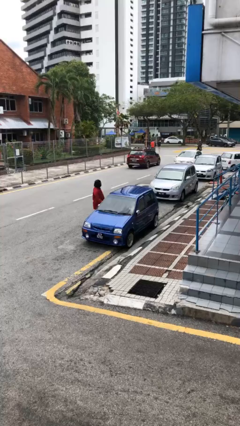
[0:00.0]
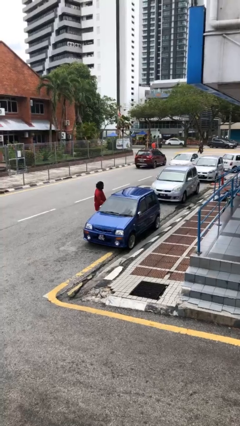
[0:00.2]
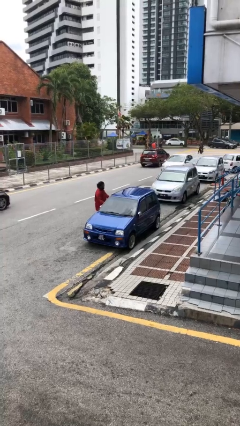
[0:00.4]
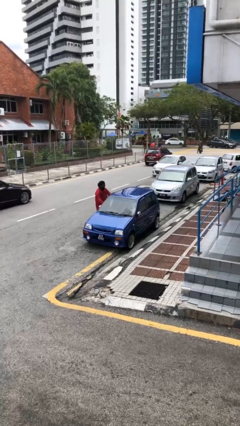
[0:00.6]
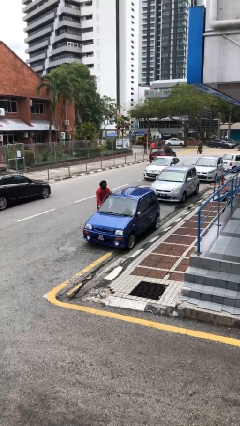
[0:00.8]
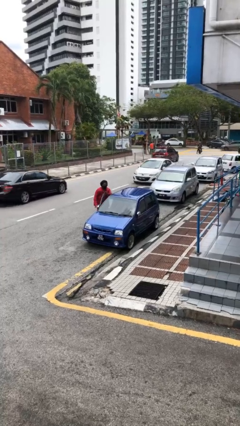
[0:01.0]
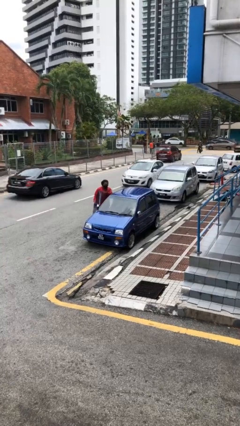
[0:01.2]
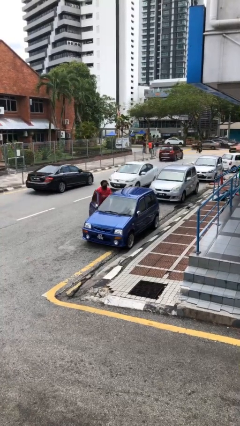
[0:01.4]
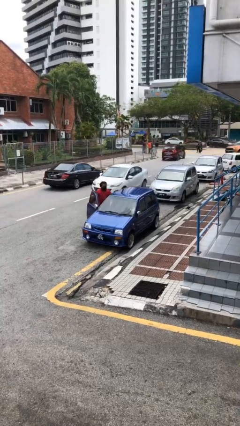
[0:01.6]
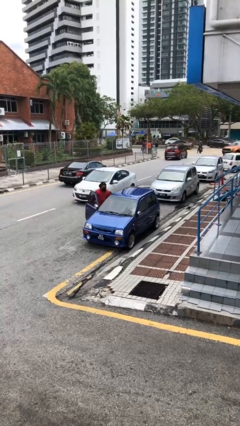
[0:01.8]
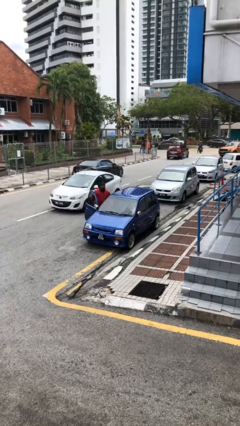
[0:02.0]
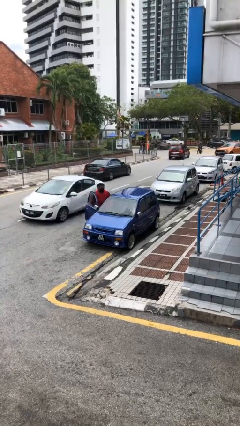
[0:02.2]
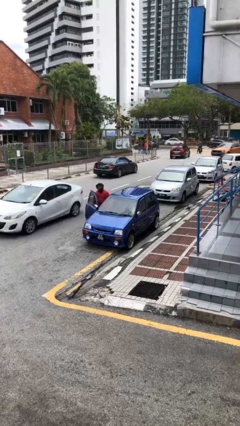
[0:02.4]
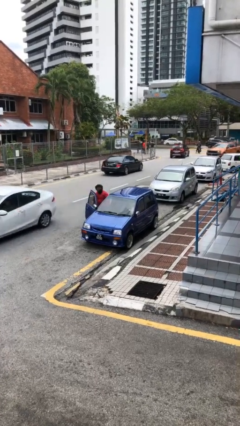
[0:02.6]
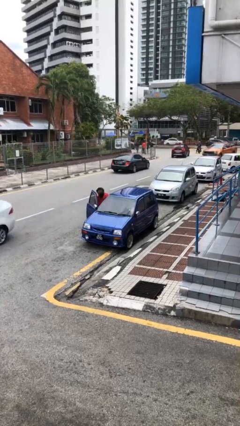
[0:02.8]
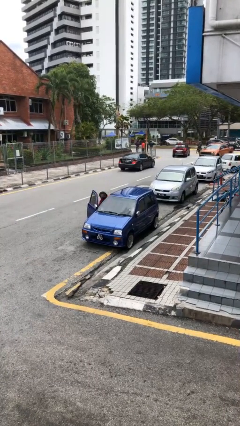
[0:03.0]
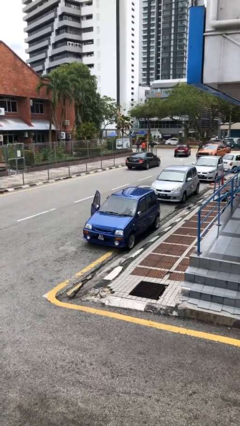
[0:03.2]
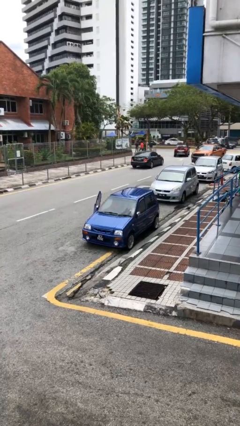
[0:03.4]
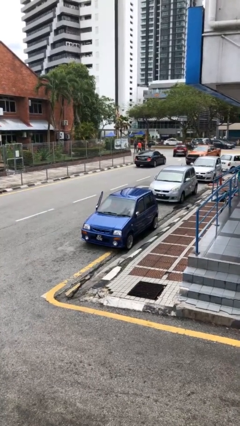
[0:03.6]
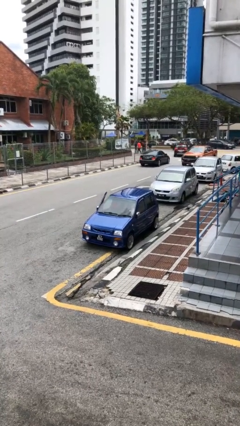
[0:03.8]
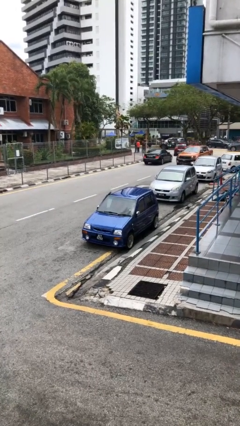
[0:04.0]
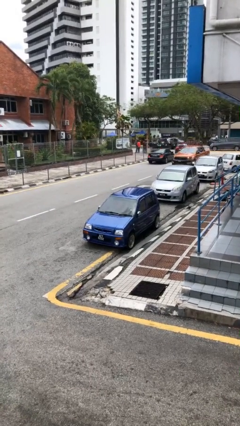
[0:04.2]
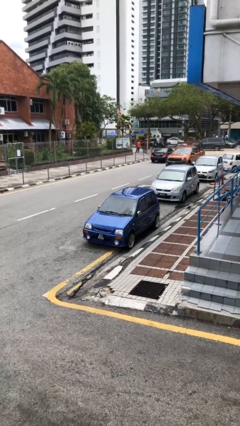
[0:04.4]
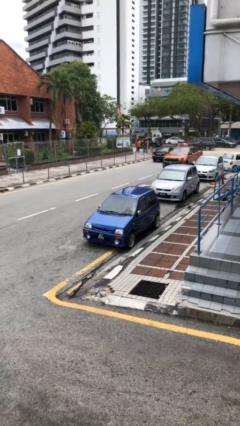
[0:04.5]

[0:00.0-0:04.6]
car picks up person

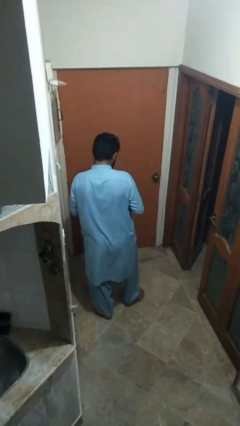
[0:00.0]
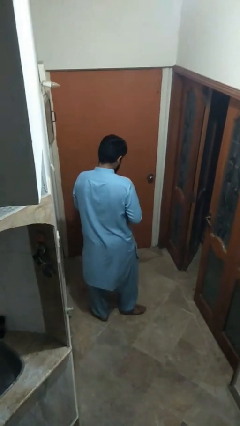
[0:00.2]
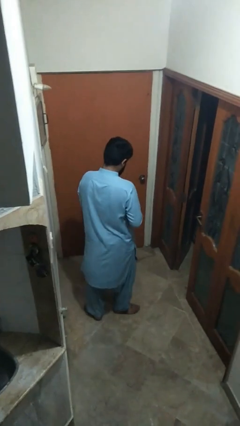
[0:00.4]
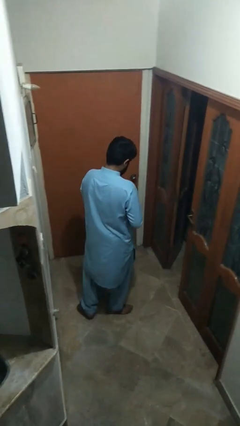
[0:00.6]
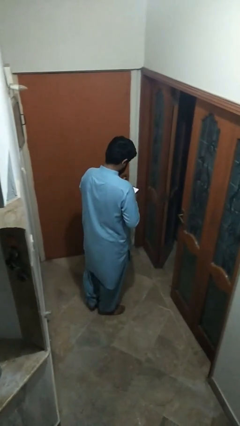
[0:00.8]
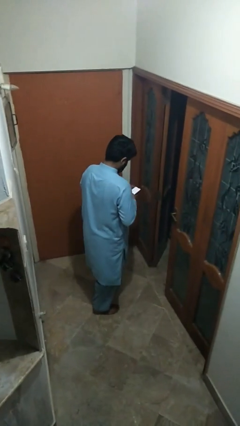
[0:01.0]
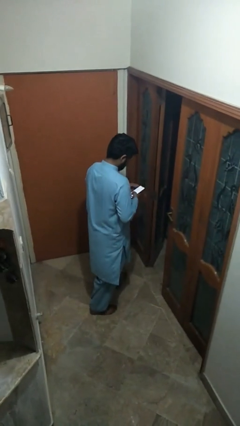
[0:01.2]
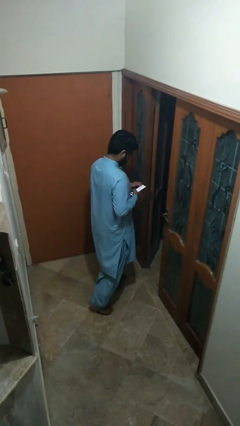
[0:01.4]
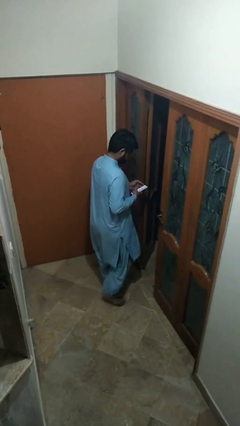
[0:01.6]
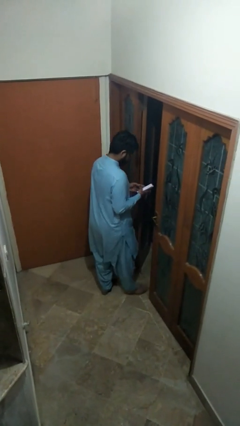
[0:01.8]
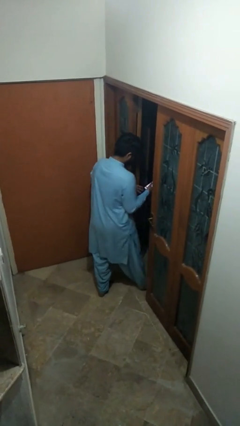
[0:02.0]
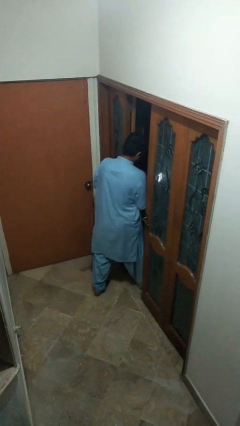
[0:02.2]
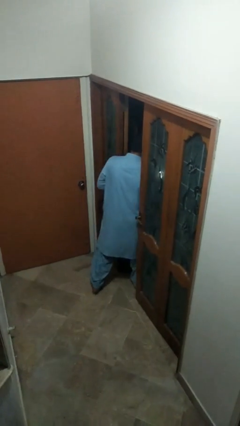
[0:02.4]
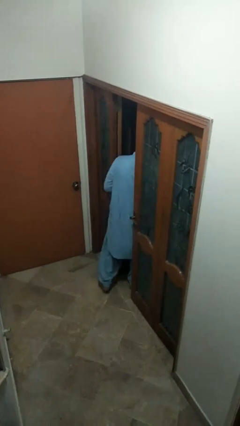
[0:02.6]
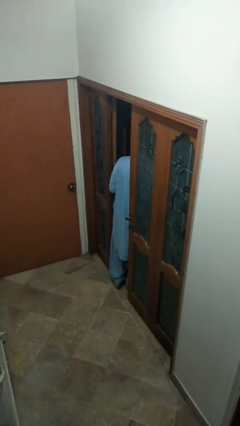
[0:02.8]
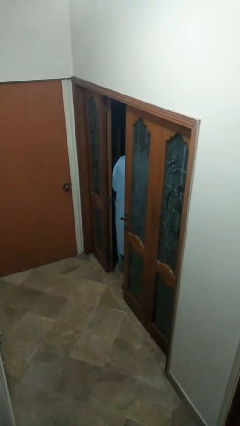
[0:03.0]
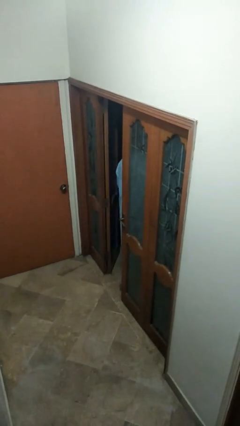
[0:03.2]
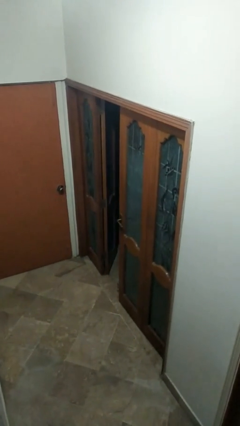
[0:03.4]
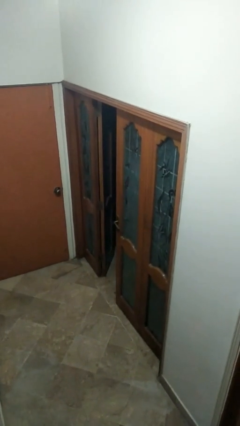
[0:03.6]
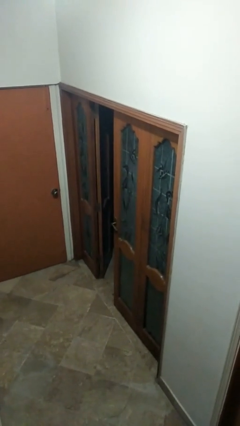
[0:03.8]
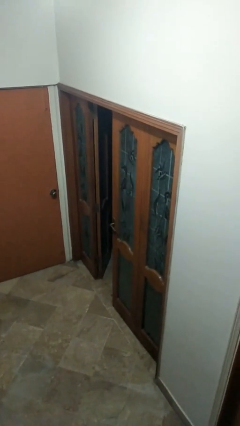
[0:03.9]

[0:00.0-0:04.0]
person exits scene through structure

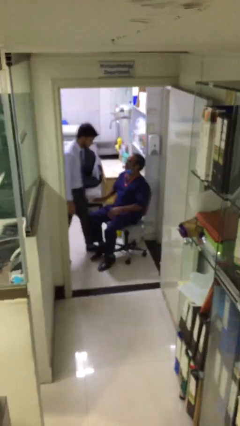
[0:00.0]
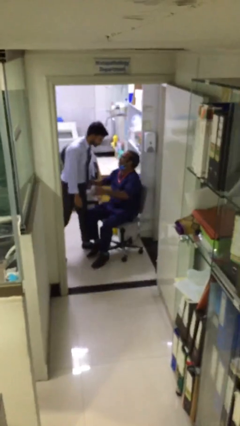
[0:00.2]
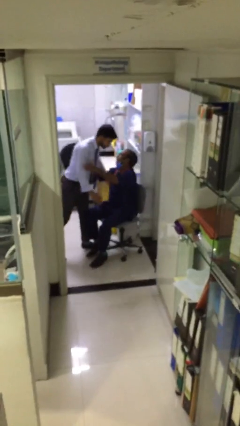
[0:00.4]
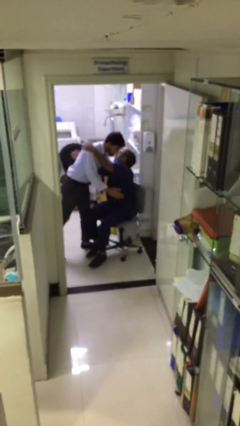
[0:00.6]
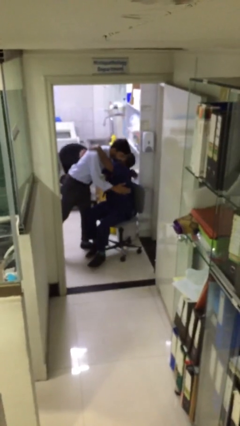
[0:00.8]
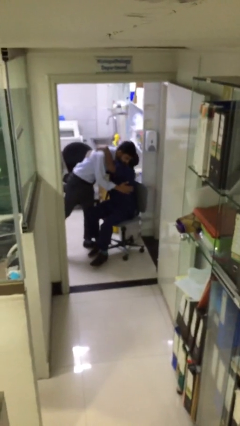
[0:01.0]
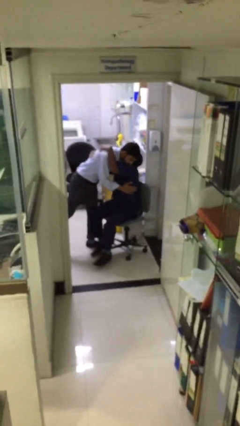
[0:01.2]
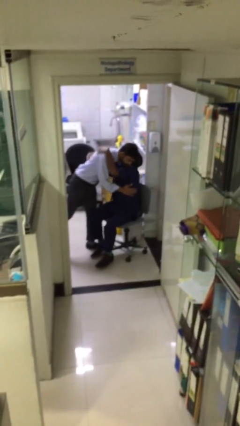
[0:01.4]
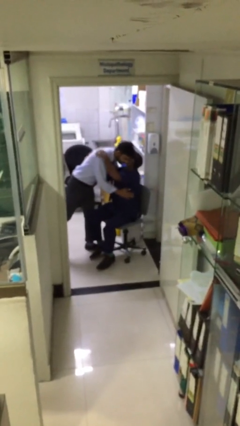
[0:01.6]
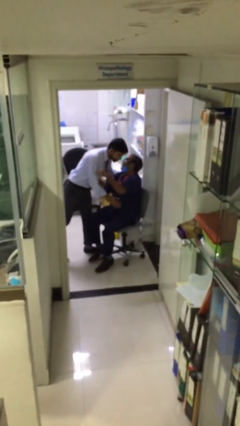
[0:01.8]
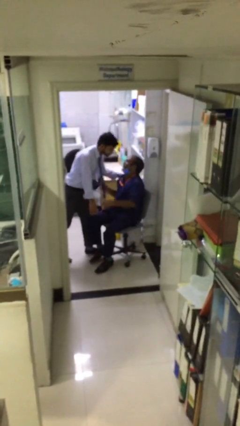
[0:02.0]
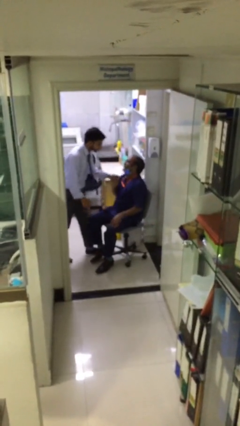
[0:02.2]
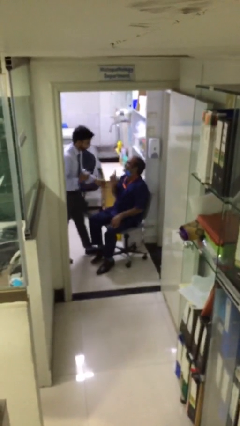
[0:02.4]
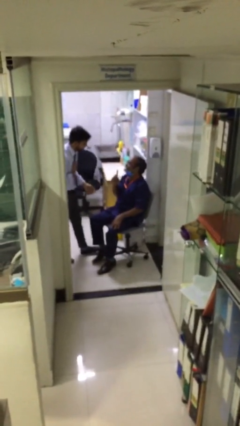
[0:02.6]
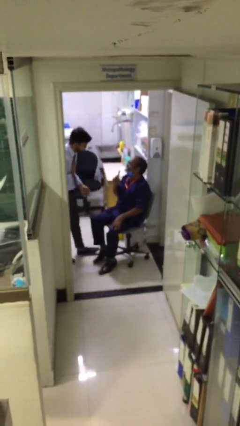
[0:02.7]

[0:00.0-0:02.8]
person embraces person

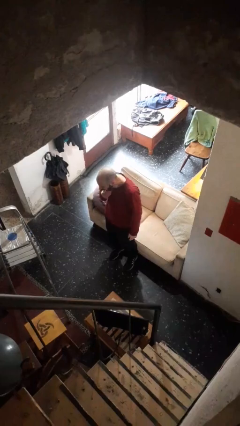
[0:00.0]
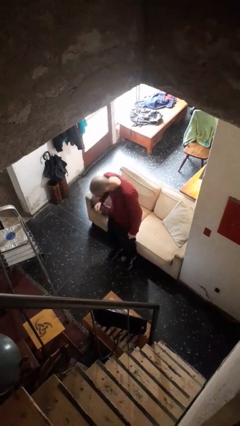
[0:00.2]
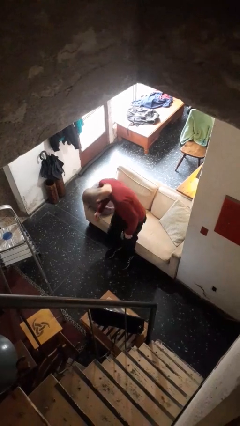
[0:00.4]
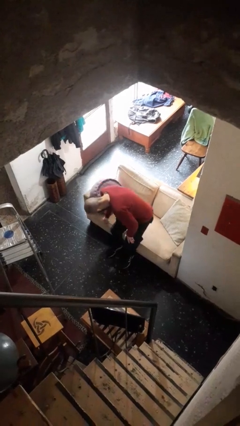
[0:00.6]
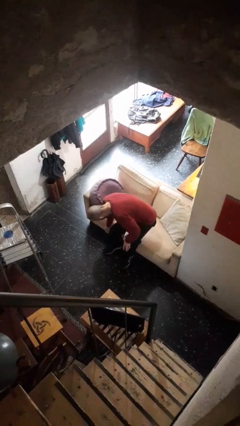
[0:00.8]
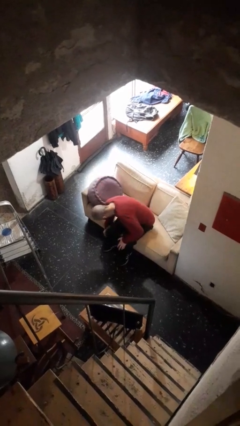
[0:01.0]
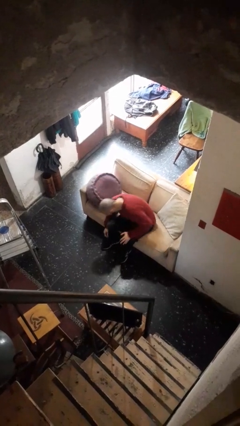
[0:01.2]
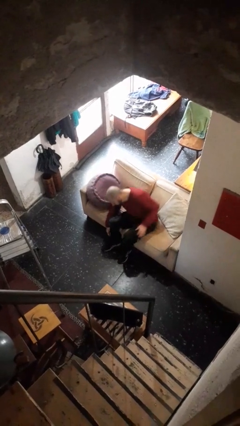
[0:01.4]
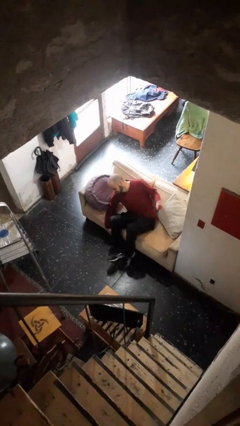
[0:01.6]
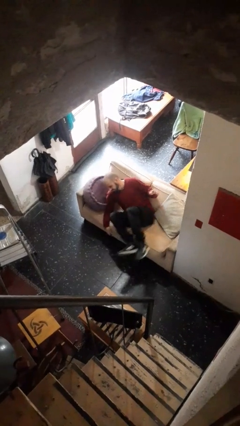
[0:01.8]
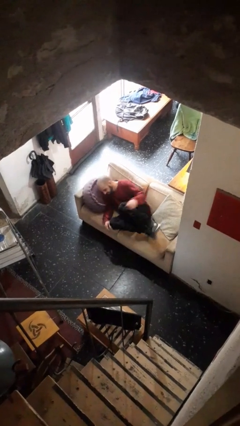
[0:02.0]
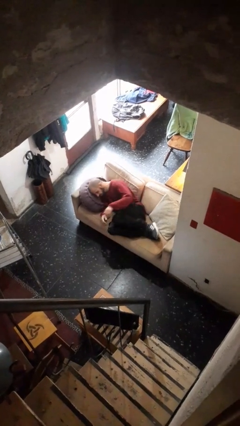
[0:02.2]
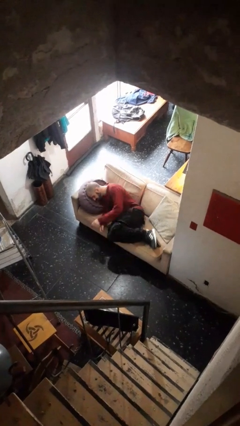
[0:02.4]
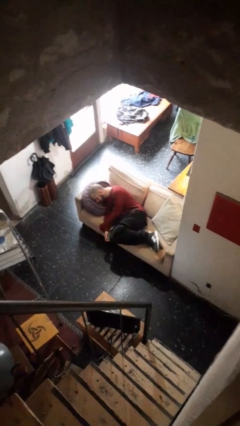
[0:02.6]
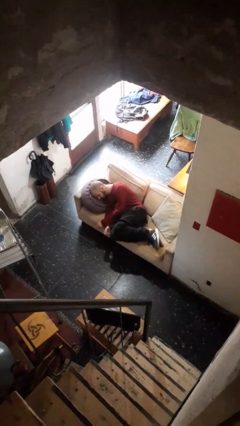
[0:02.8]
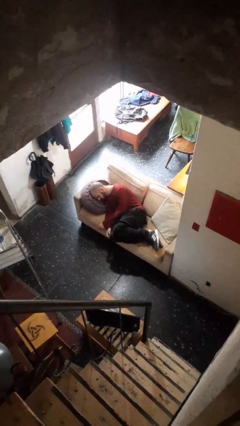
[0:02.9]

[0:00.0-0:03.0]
person lies down on couch

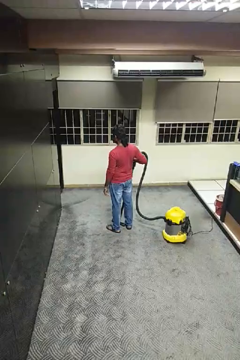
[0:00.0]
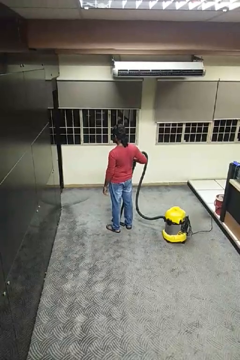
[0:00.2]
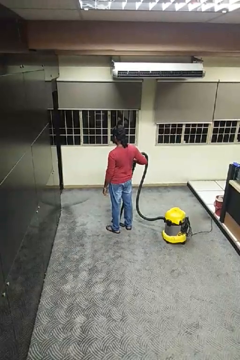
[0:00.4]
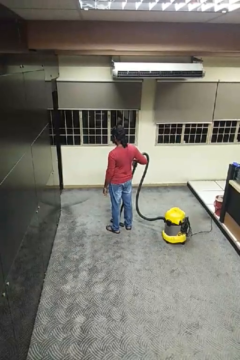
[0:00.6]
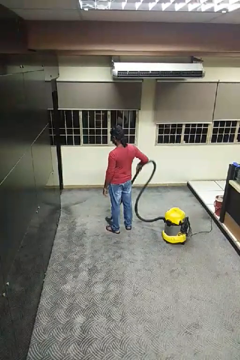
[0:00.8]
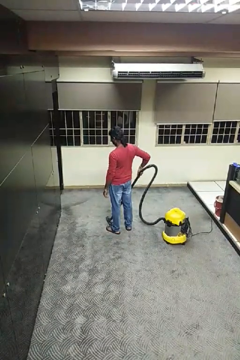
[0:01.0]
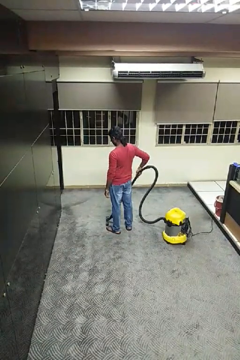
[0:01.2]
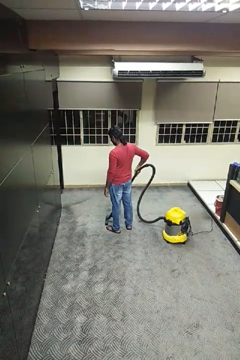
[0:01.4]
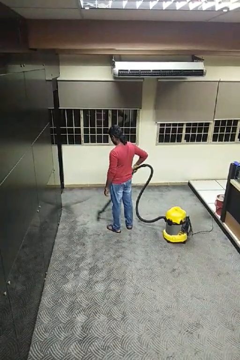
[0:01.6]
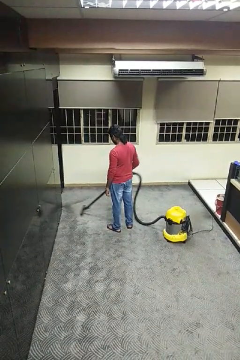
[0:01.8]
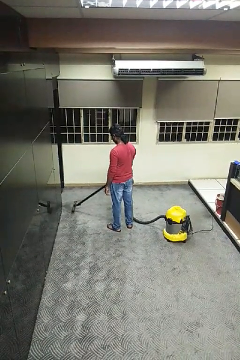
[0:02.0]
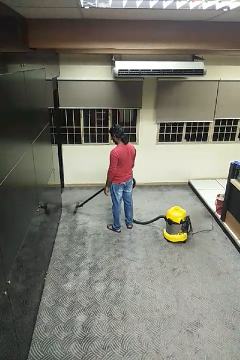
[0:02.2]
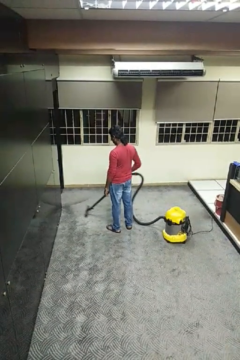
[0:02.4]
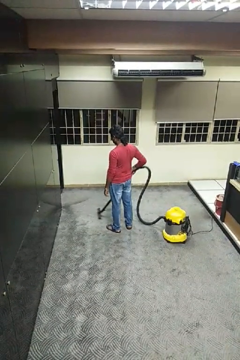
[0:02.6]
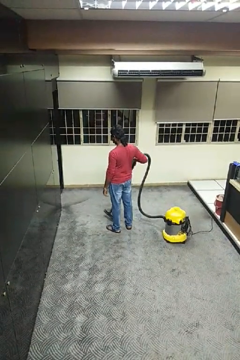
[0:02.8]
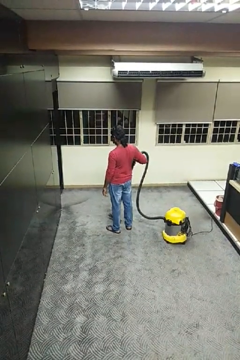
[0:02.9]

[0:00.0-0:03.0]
person vacuums carpet

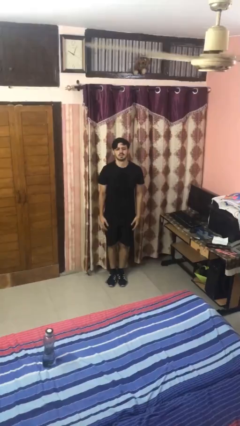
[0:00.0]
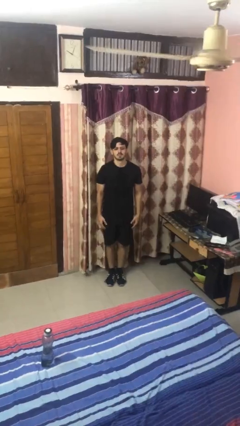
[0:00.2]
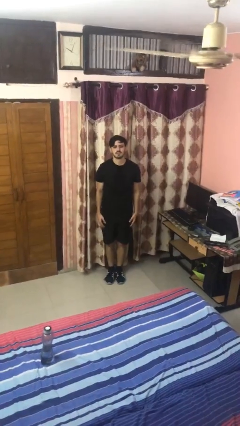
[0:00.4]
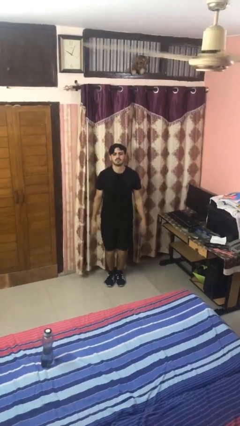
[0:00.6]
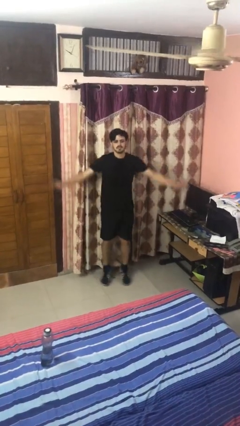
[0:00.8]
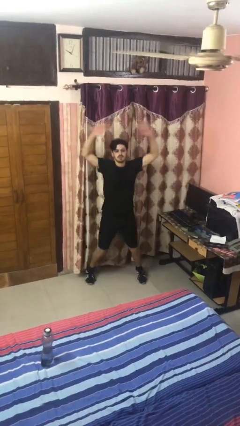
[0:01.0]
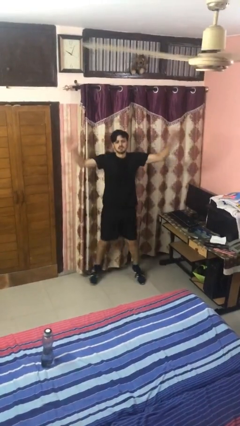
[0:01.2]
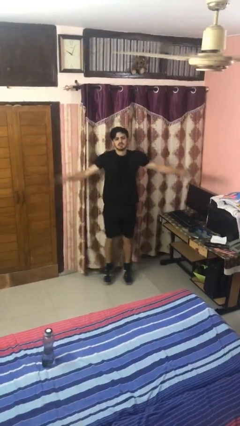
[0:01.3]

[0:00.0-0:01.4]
person exercises with jumping jacks
